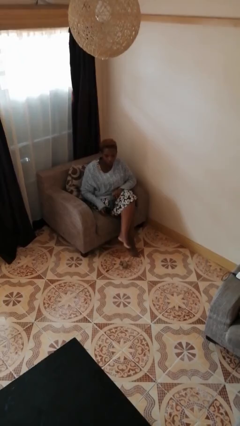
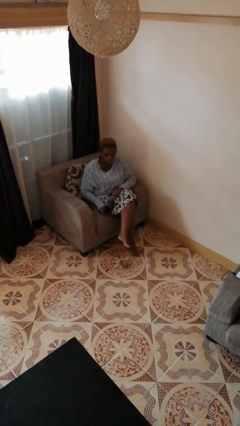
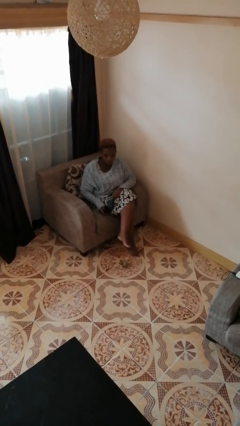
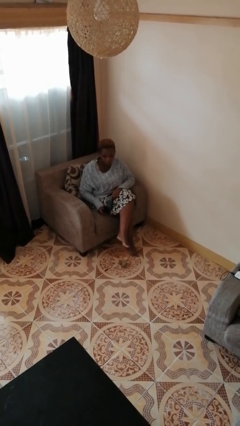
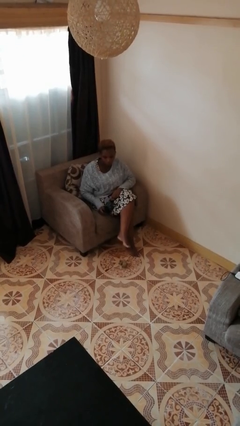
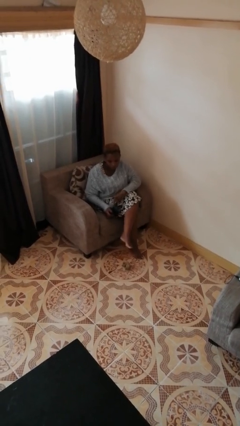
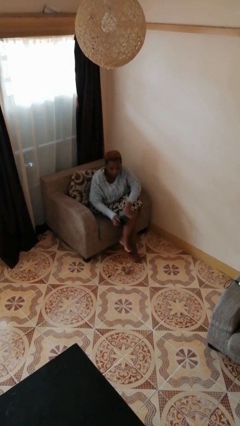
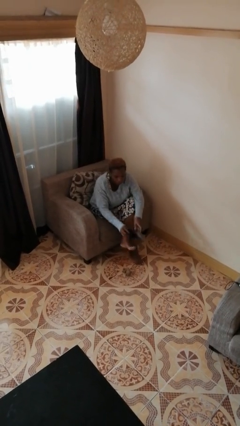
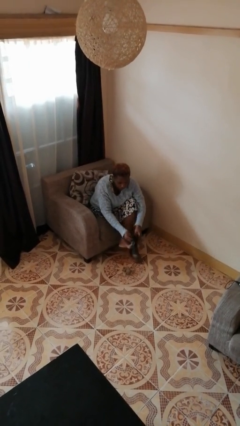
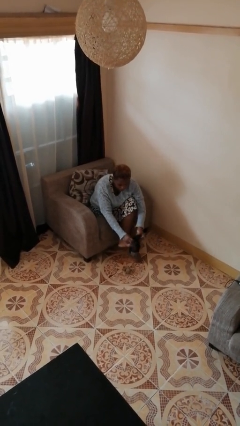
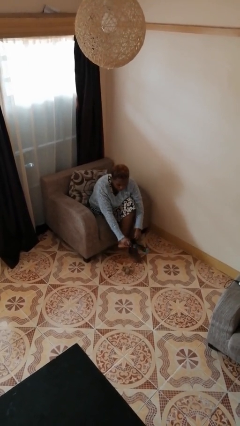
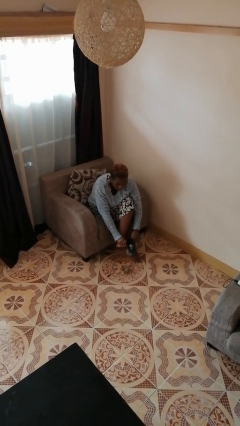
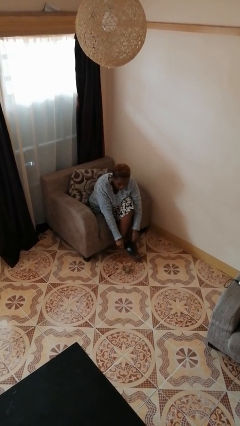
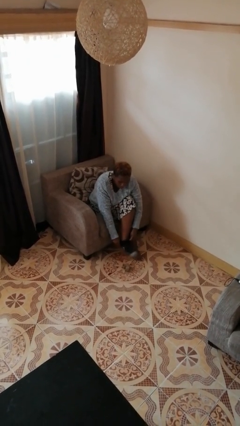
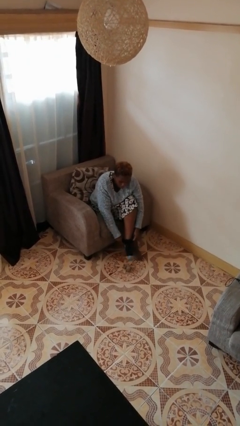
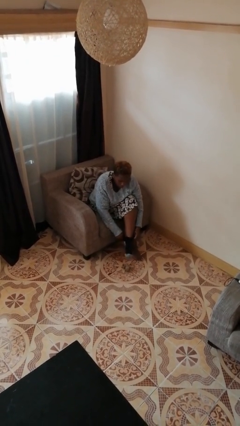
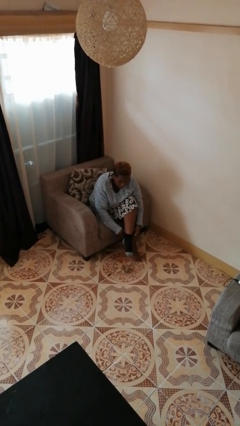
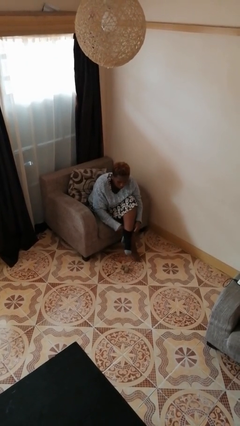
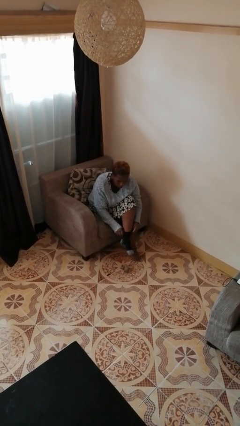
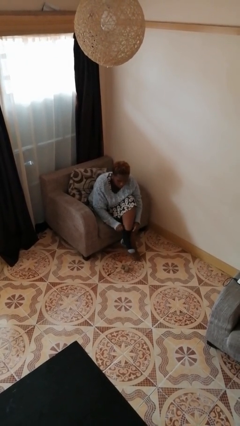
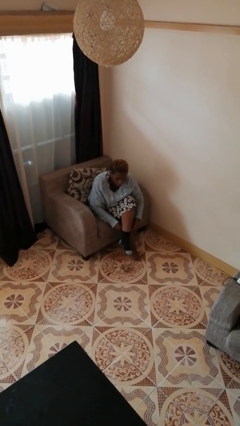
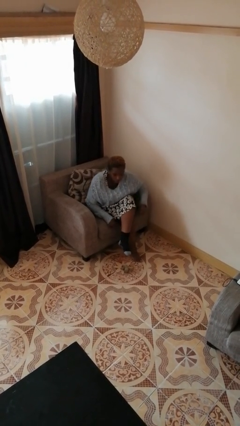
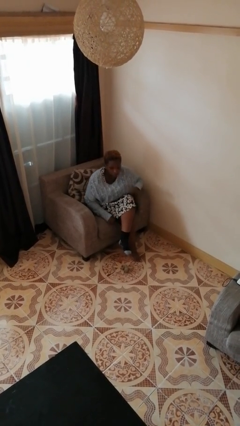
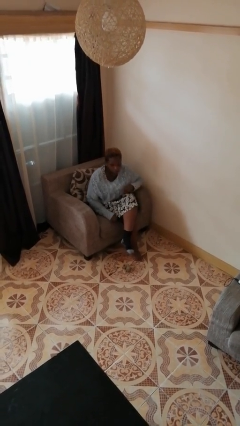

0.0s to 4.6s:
person puts on socks

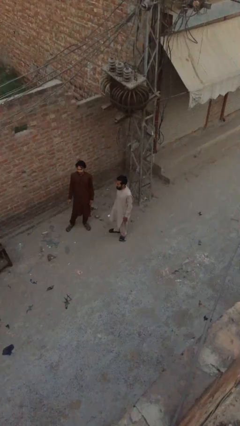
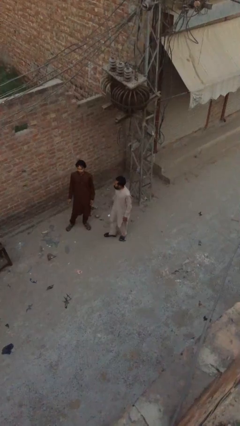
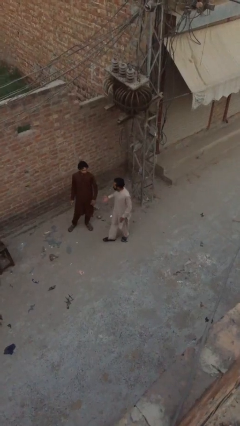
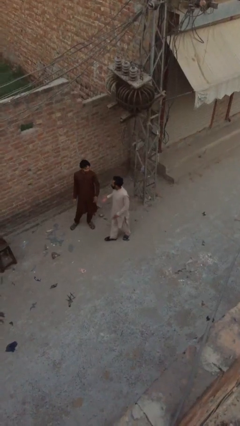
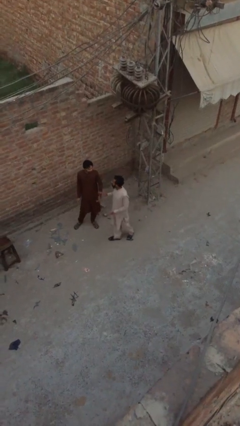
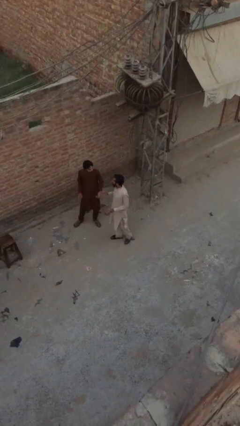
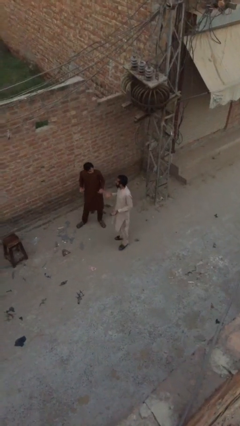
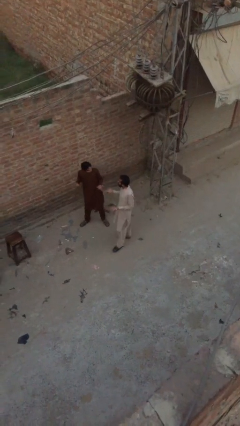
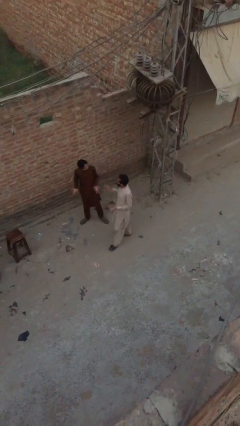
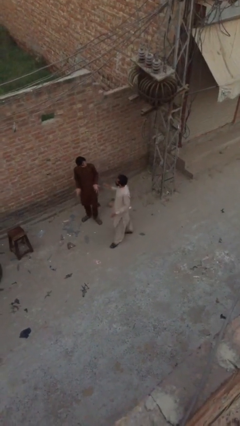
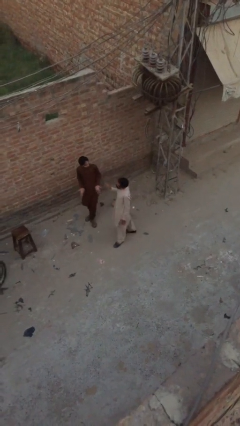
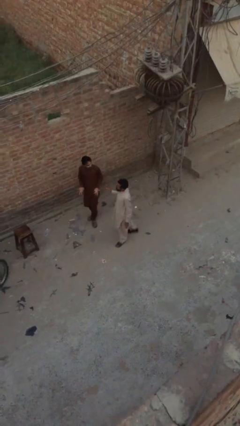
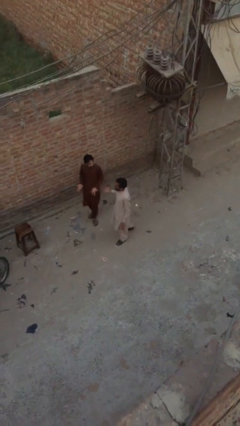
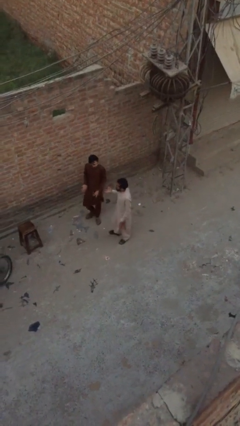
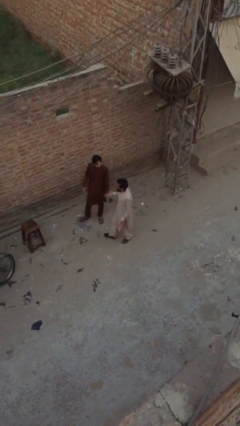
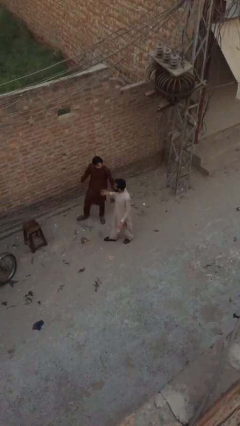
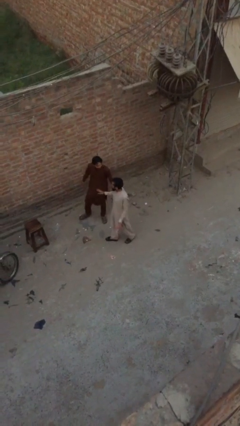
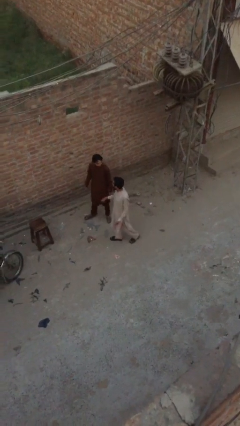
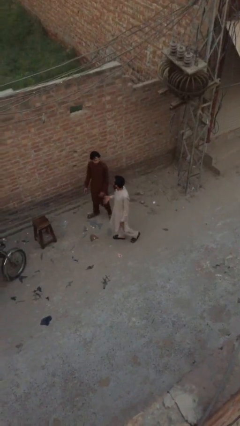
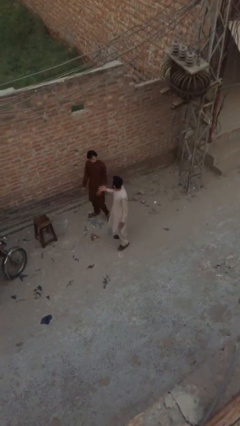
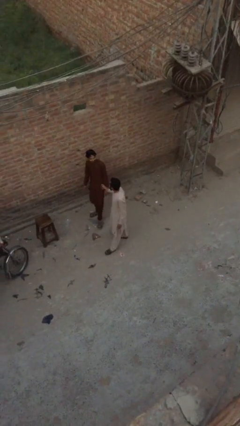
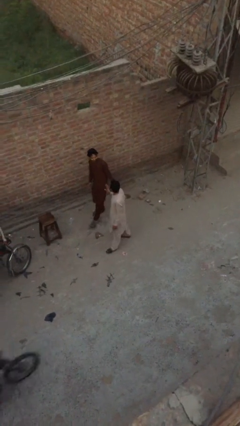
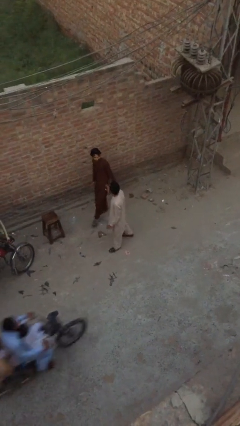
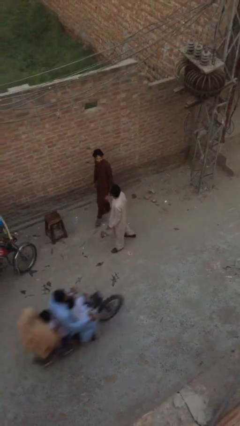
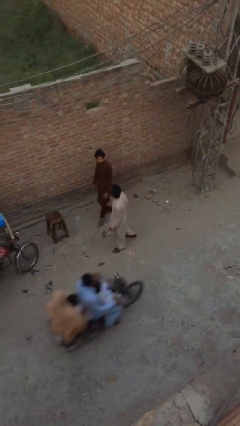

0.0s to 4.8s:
person talks to person

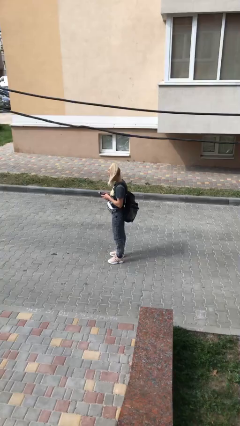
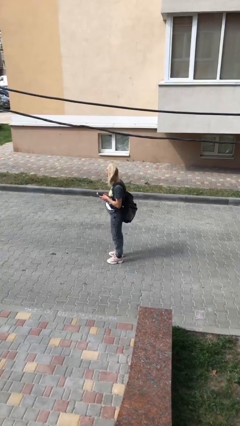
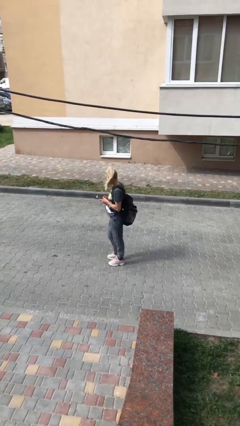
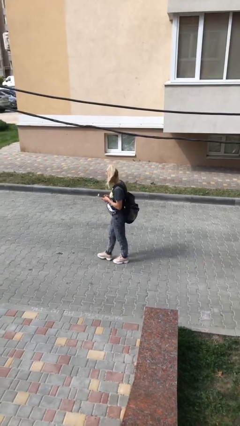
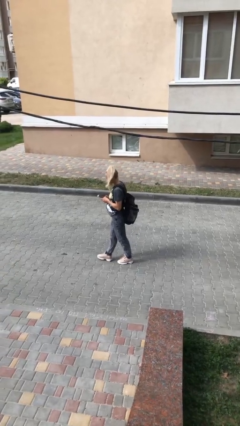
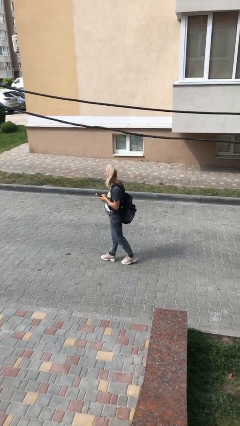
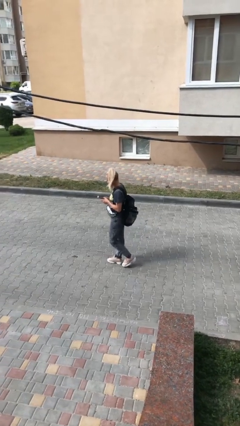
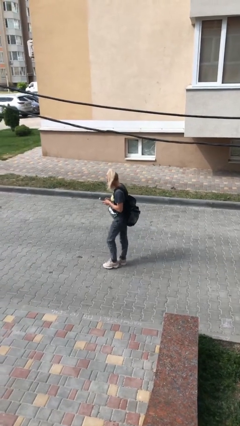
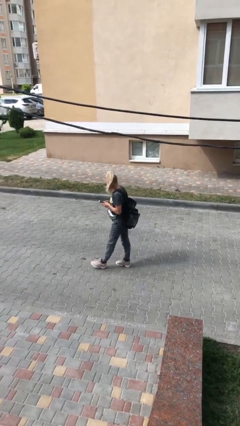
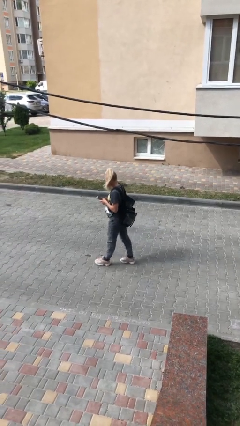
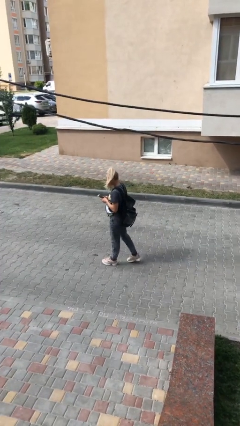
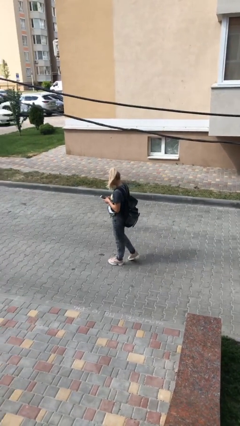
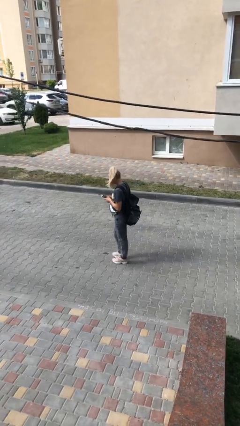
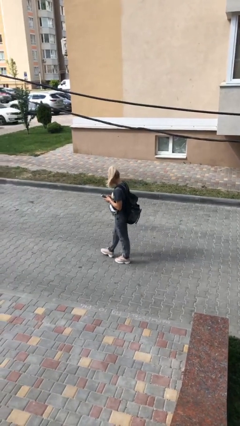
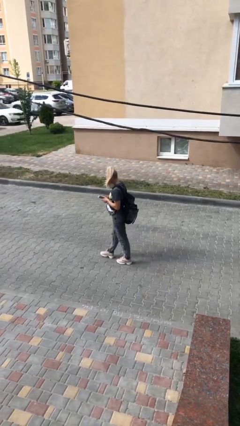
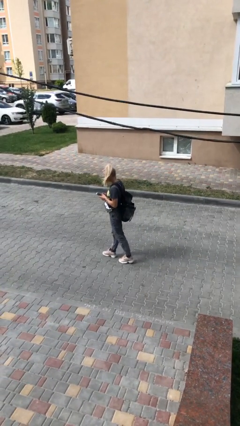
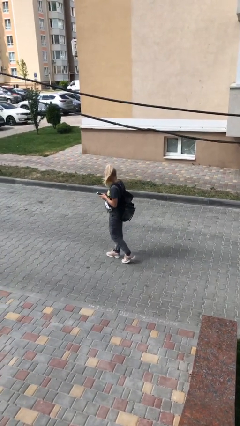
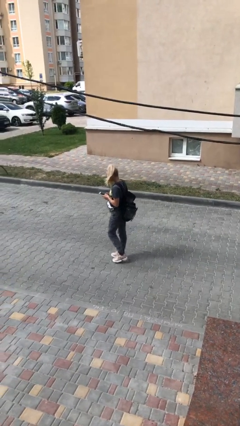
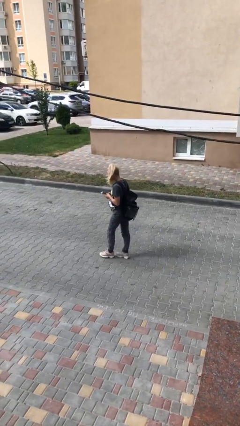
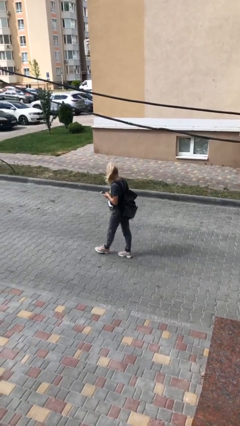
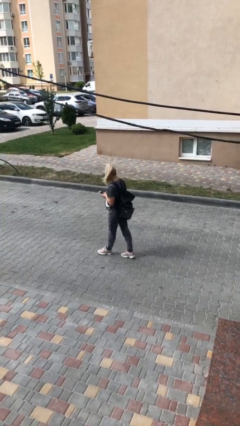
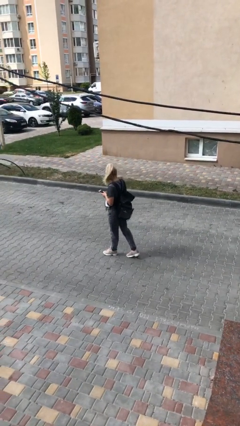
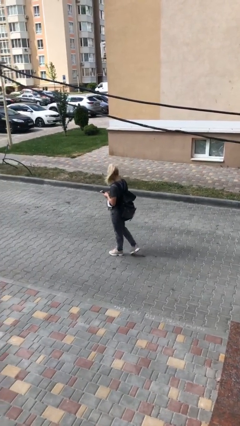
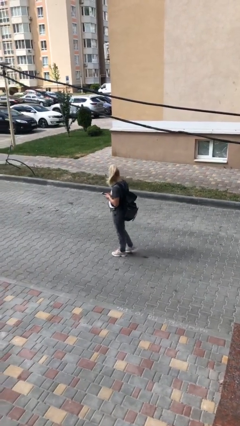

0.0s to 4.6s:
person texts on phone

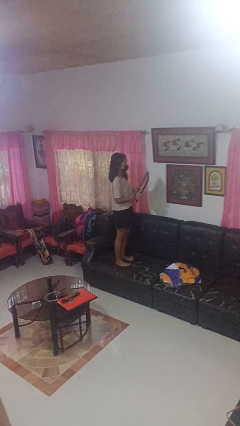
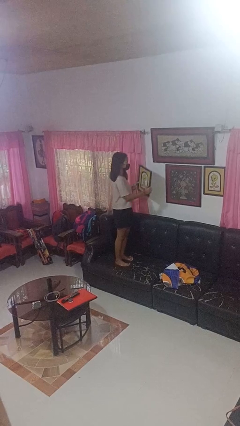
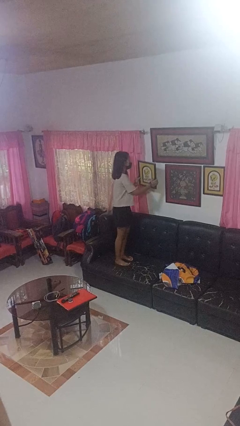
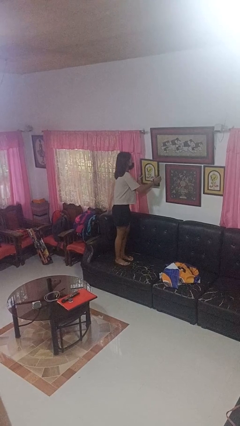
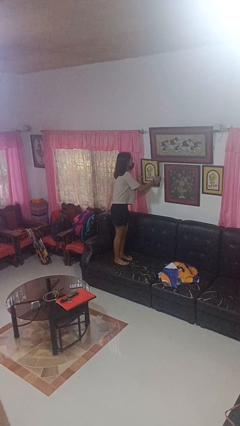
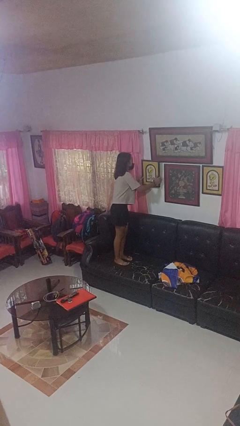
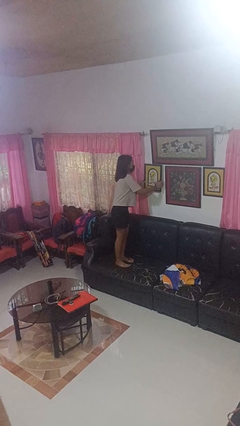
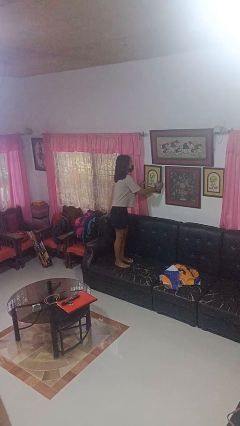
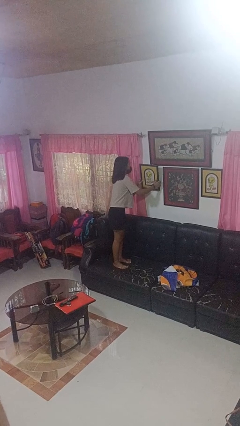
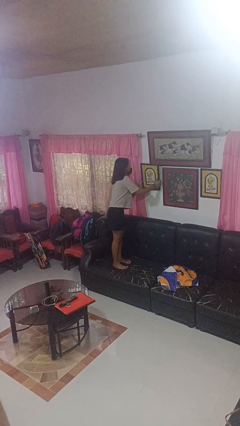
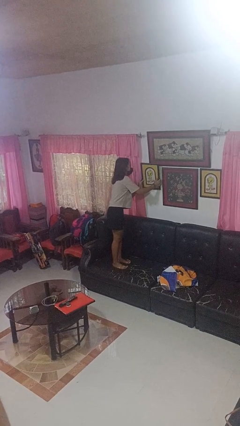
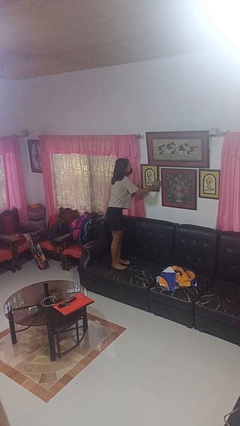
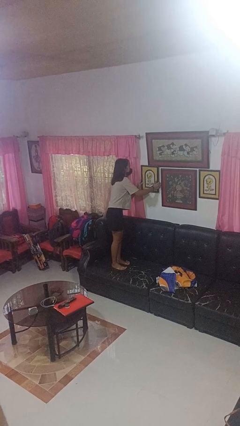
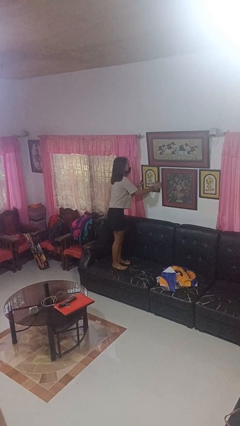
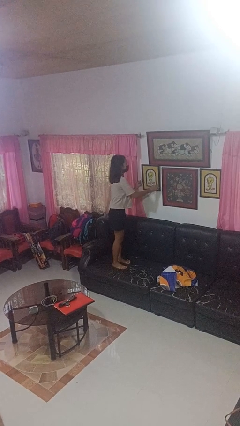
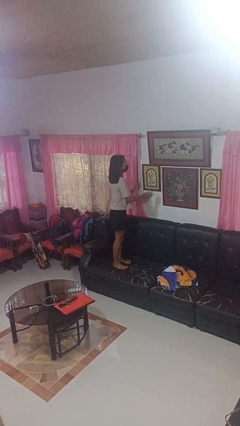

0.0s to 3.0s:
person puts up picture frame

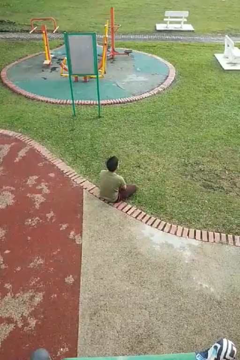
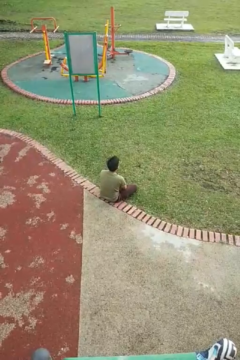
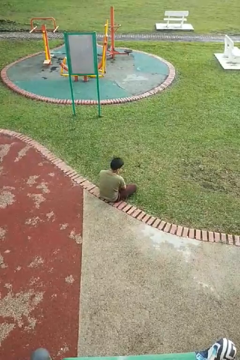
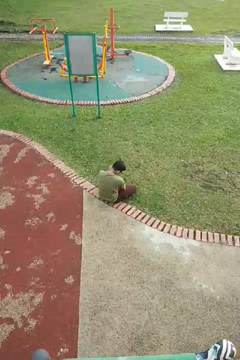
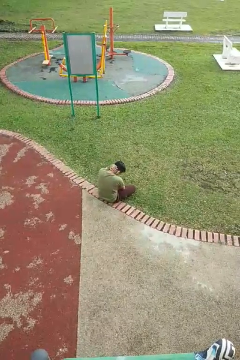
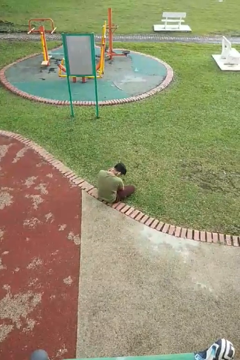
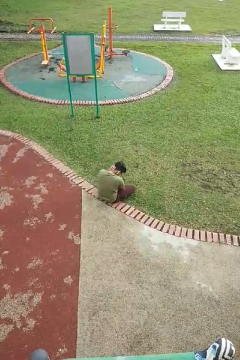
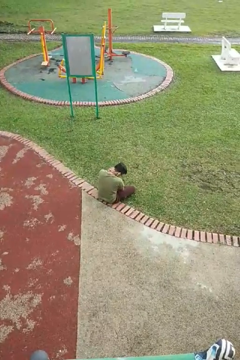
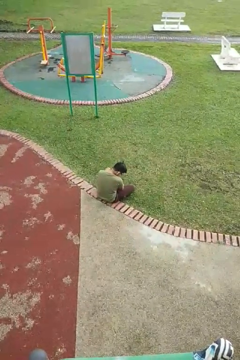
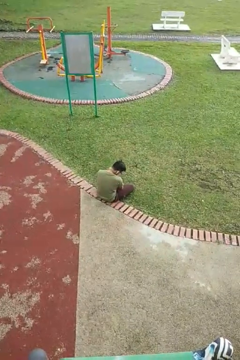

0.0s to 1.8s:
person rubs neck
